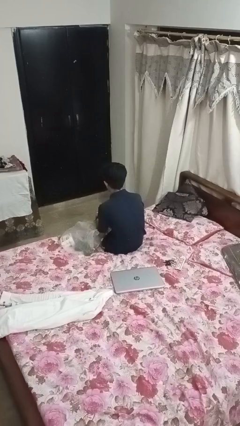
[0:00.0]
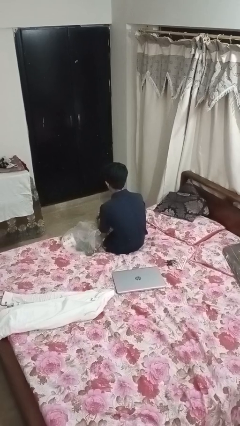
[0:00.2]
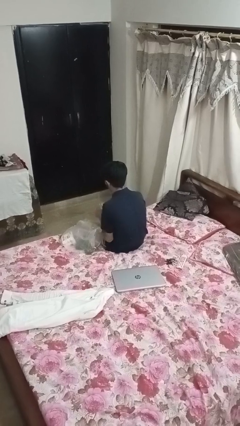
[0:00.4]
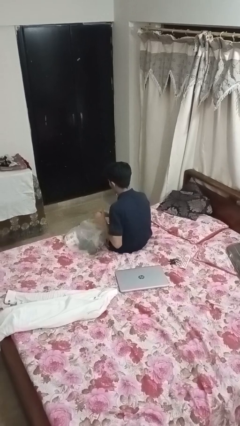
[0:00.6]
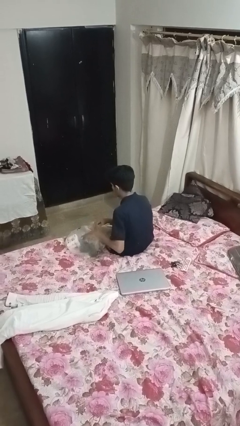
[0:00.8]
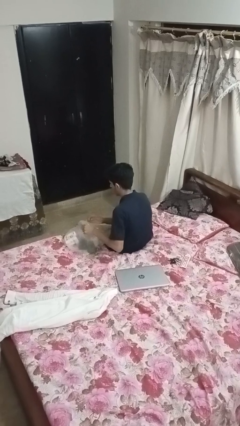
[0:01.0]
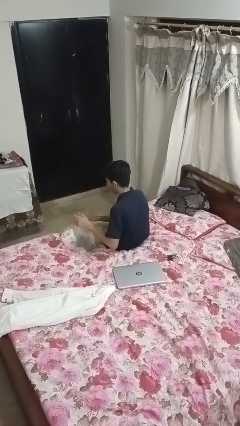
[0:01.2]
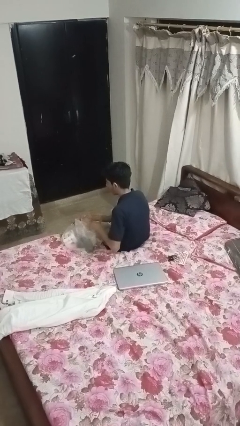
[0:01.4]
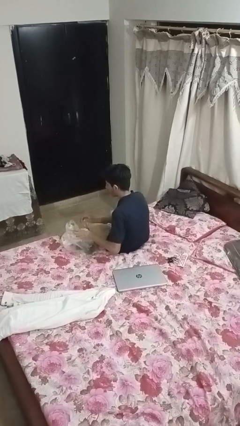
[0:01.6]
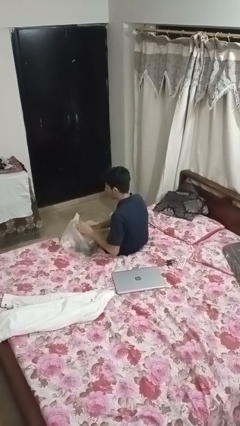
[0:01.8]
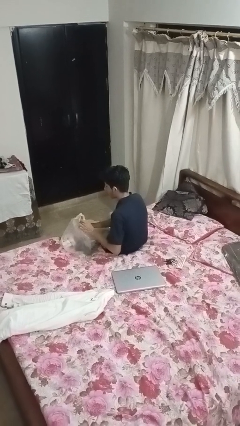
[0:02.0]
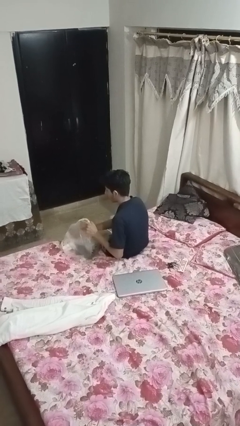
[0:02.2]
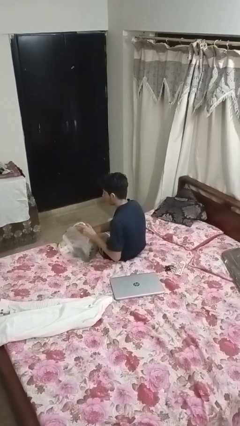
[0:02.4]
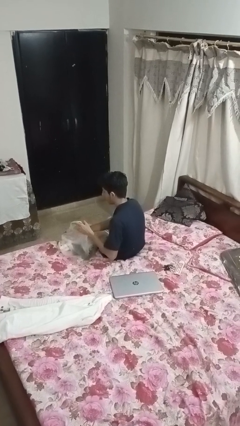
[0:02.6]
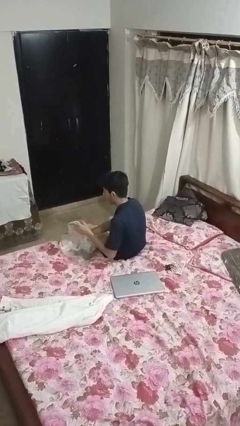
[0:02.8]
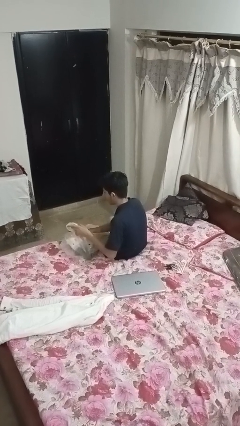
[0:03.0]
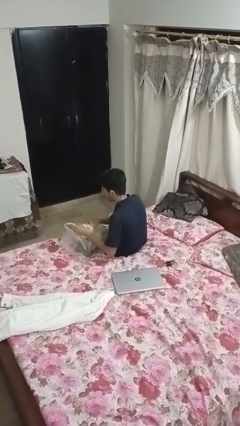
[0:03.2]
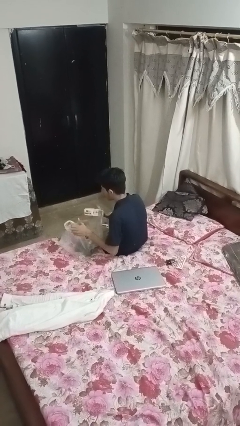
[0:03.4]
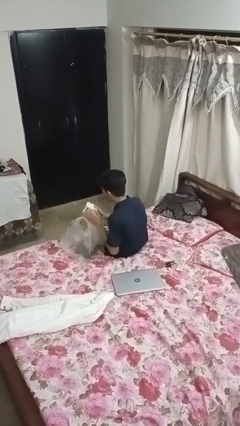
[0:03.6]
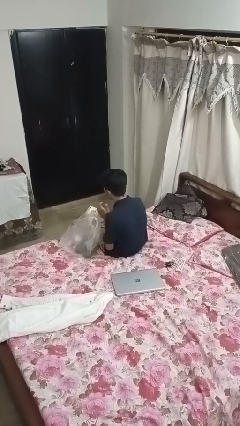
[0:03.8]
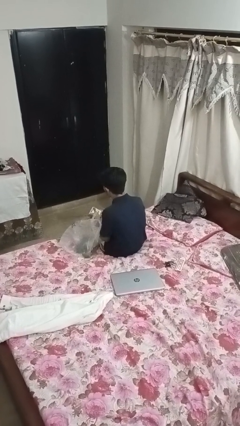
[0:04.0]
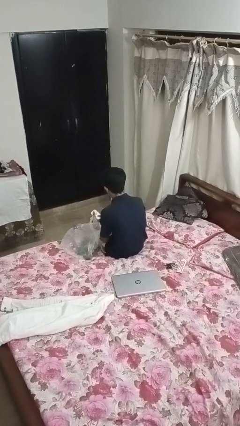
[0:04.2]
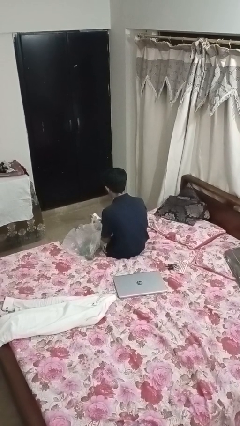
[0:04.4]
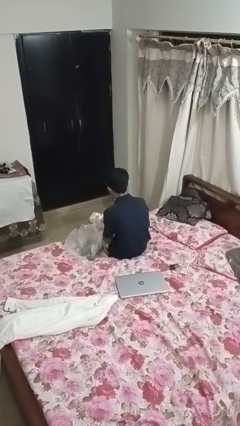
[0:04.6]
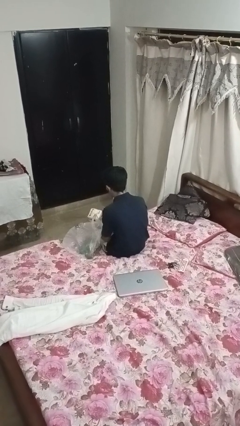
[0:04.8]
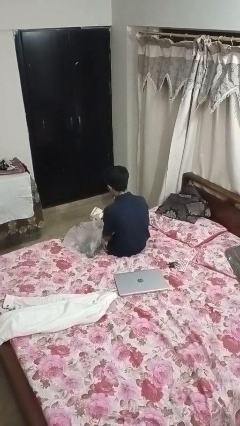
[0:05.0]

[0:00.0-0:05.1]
person takes object from bag

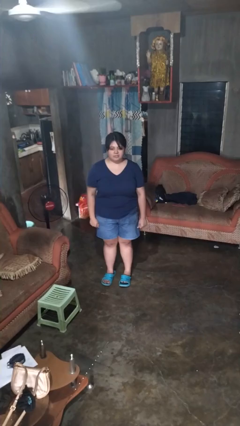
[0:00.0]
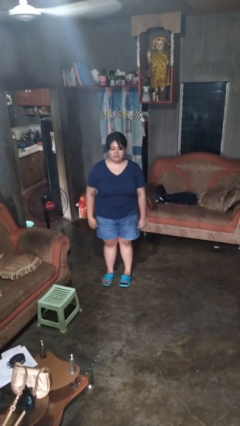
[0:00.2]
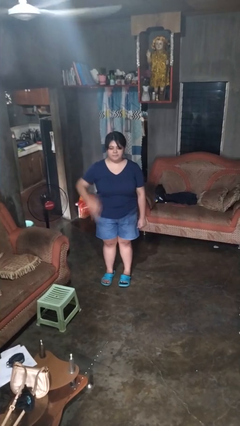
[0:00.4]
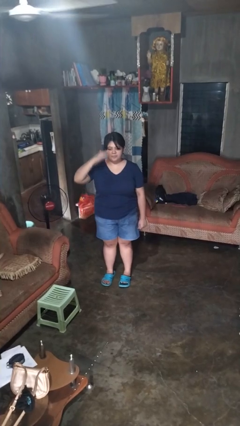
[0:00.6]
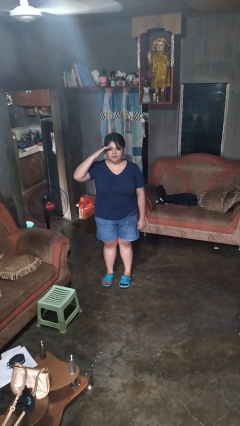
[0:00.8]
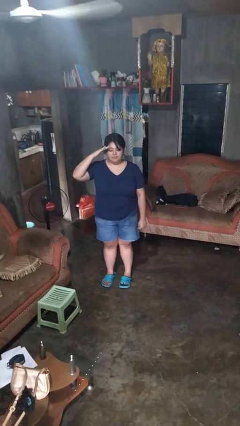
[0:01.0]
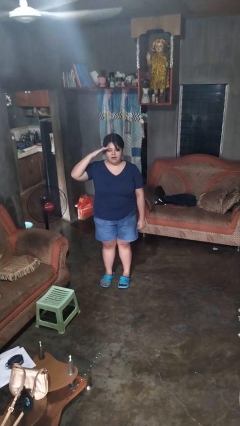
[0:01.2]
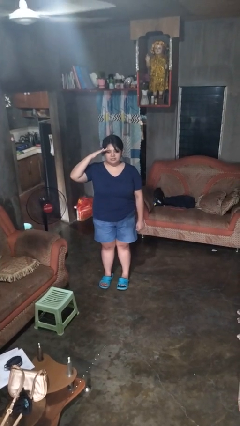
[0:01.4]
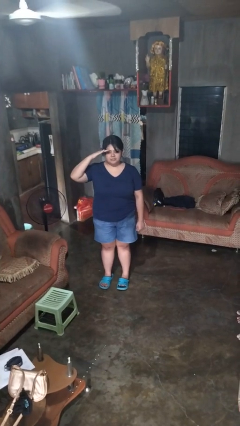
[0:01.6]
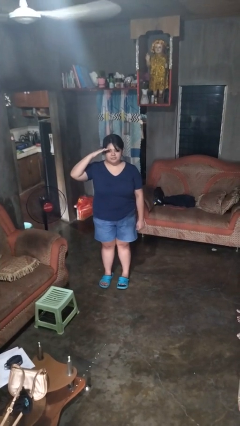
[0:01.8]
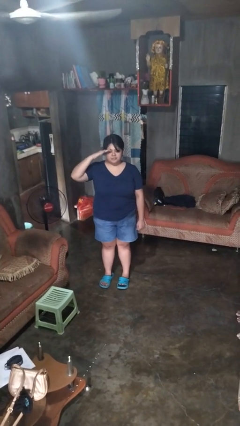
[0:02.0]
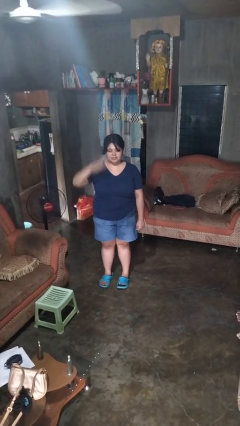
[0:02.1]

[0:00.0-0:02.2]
person salutes

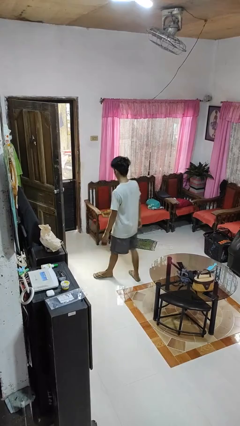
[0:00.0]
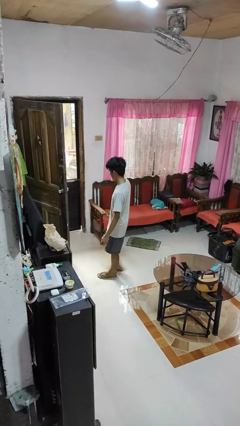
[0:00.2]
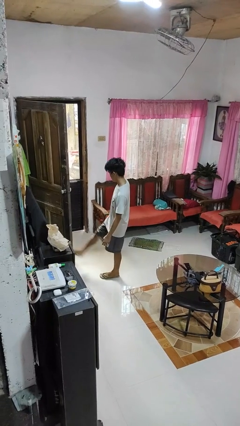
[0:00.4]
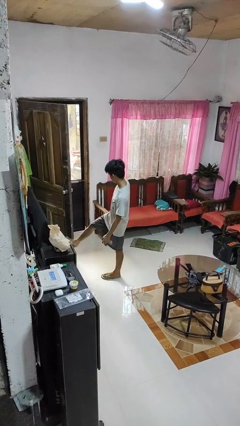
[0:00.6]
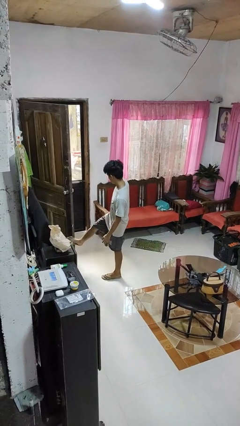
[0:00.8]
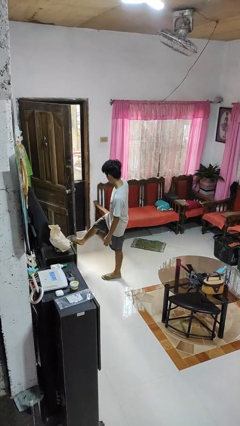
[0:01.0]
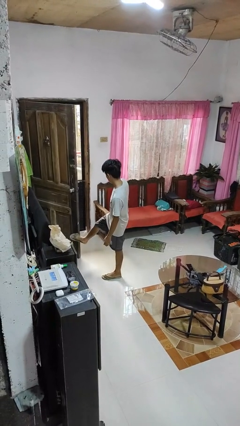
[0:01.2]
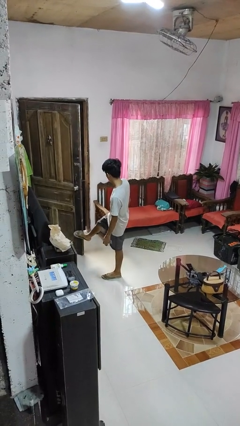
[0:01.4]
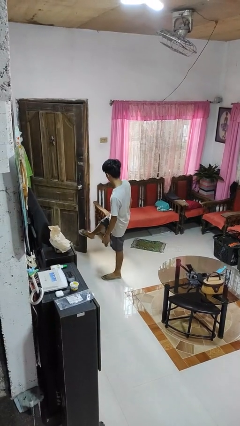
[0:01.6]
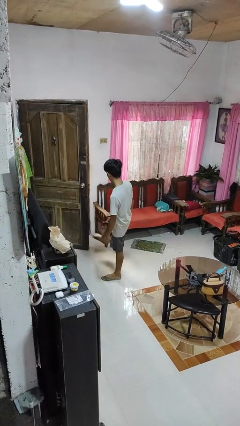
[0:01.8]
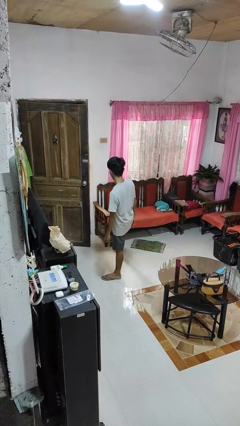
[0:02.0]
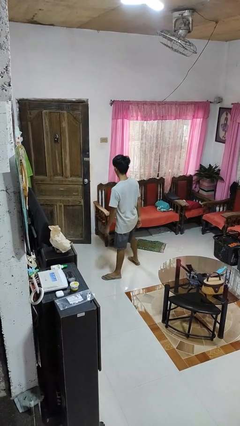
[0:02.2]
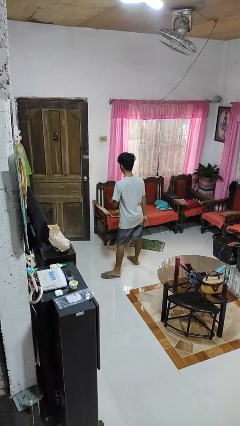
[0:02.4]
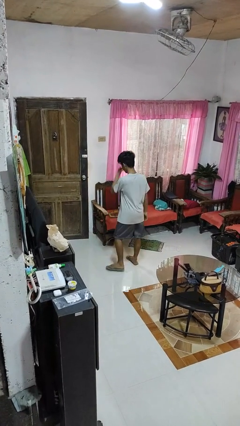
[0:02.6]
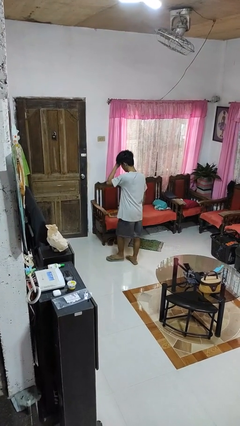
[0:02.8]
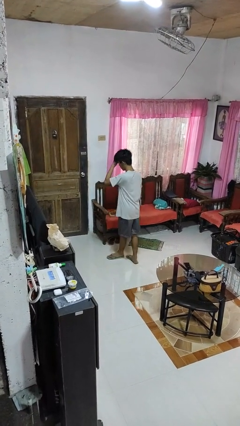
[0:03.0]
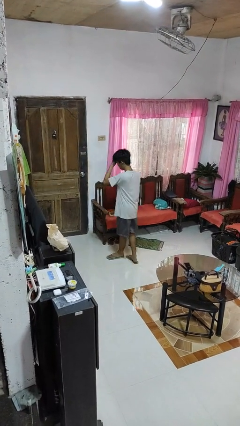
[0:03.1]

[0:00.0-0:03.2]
person closes door with foot

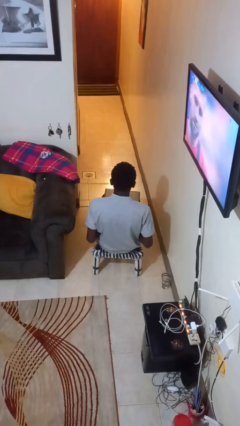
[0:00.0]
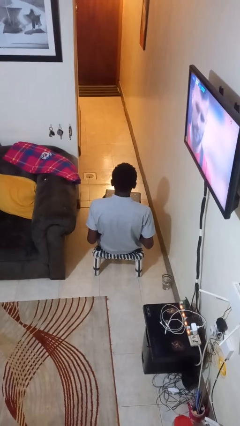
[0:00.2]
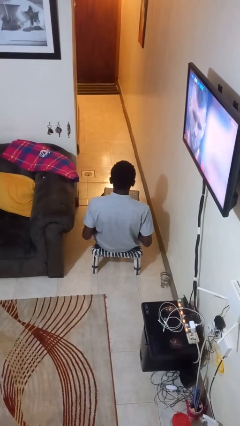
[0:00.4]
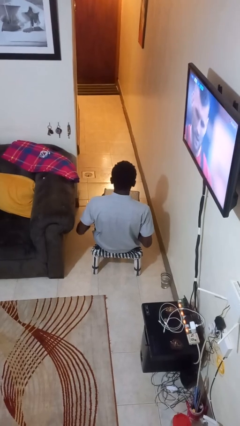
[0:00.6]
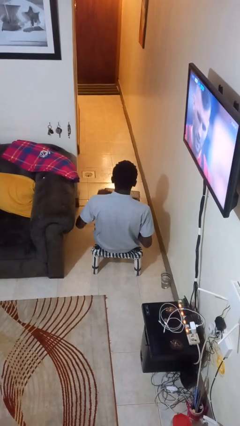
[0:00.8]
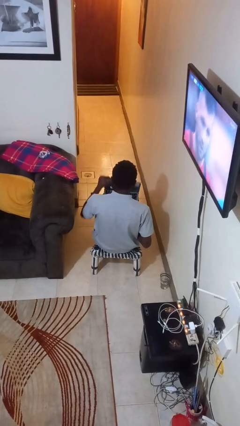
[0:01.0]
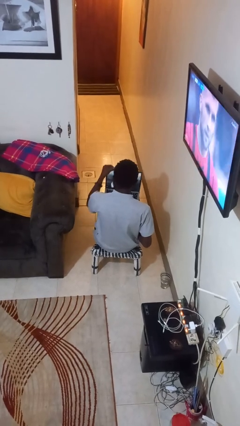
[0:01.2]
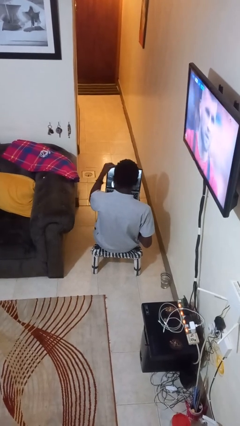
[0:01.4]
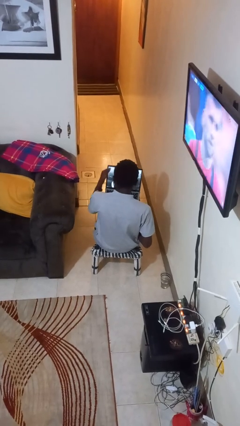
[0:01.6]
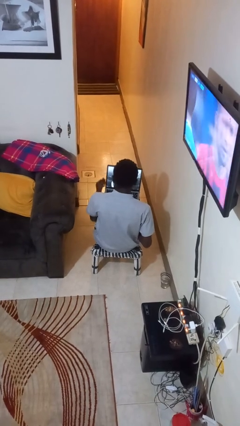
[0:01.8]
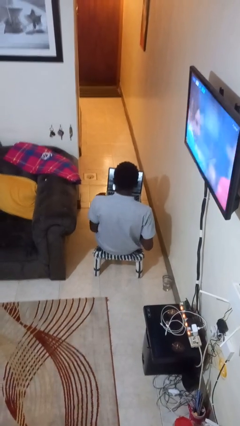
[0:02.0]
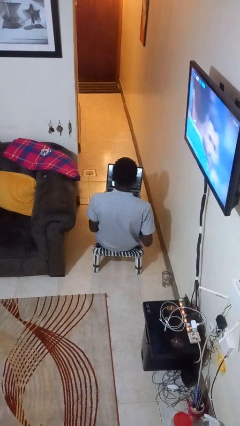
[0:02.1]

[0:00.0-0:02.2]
person opens laptop

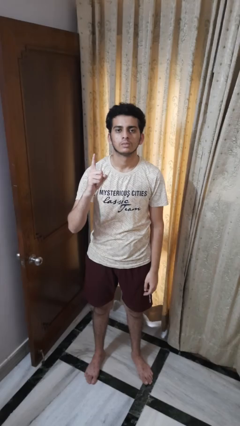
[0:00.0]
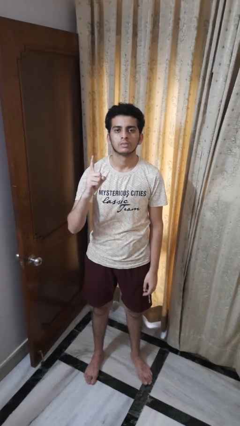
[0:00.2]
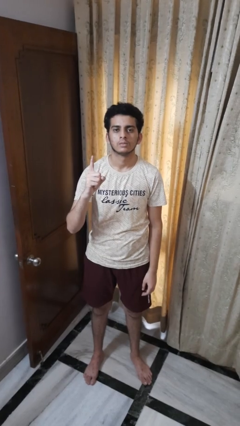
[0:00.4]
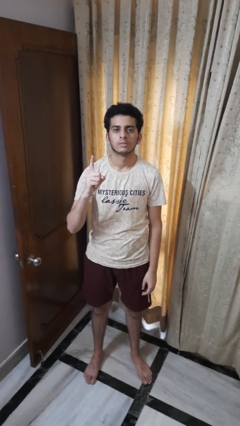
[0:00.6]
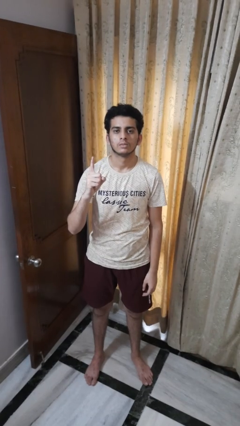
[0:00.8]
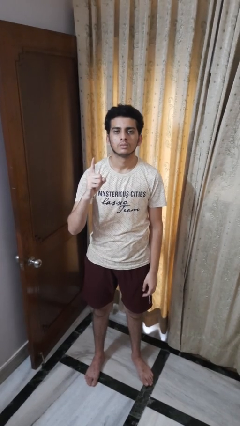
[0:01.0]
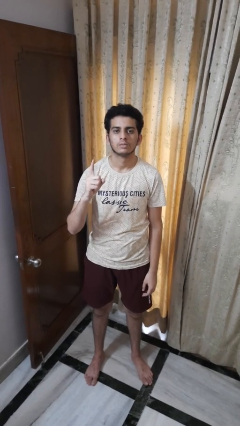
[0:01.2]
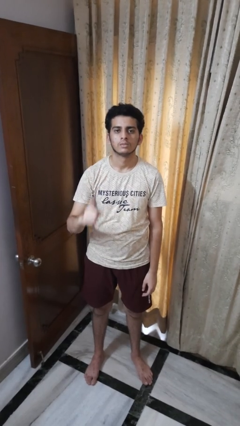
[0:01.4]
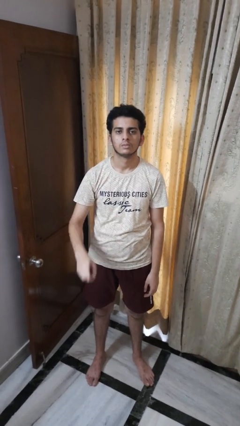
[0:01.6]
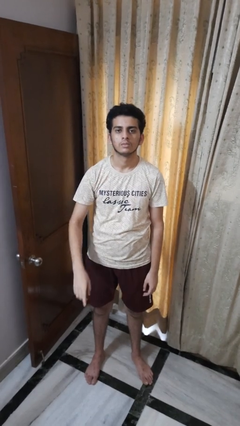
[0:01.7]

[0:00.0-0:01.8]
person gestures number one

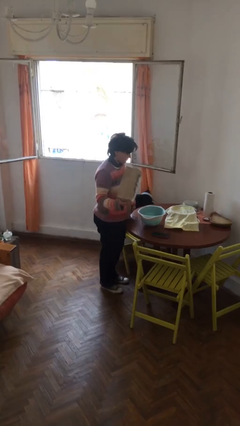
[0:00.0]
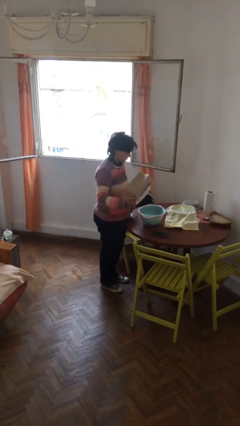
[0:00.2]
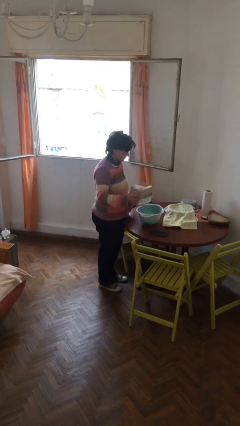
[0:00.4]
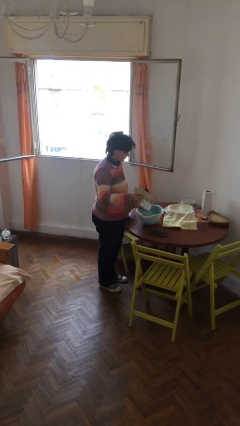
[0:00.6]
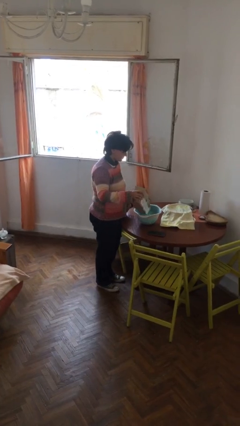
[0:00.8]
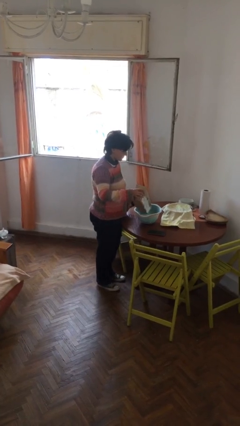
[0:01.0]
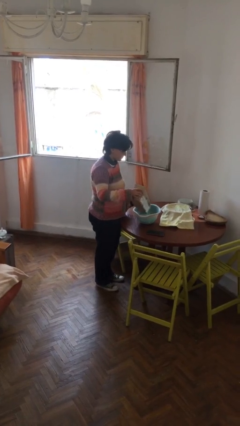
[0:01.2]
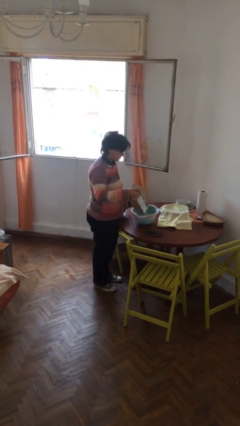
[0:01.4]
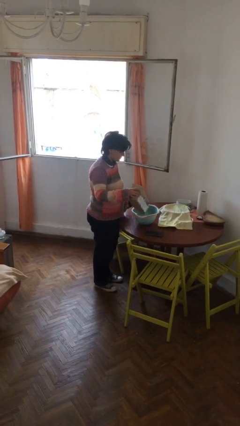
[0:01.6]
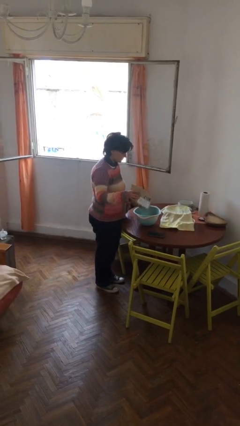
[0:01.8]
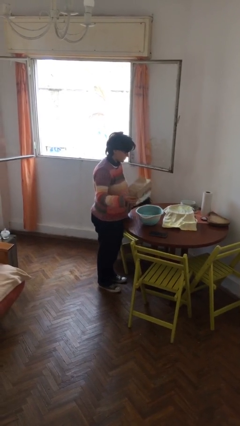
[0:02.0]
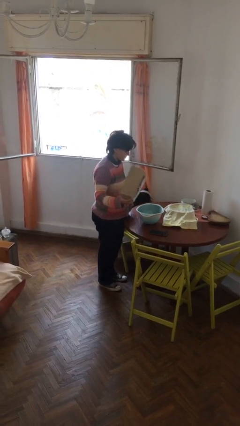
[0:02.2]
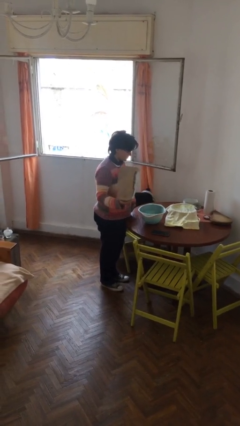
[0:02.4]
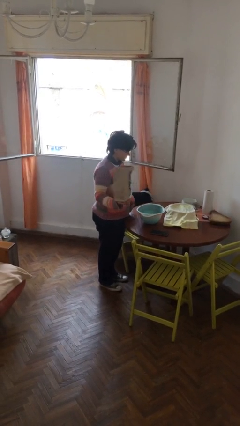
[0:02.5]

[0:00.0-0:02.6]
person pours into bowl
